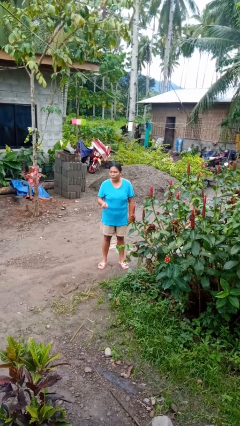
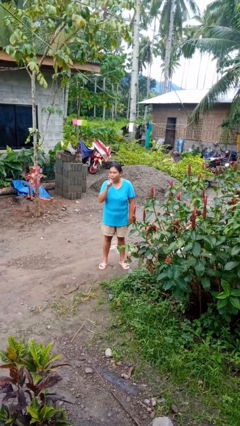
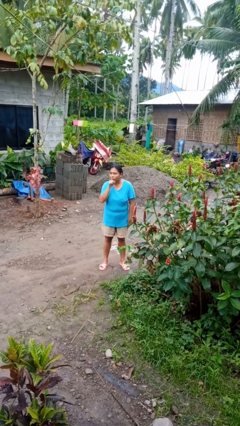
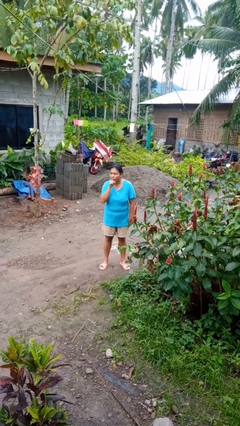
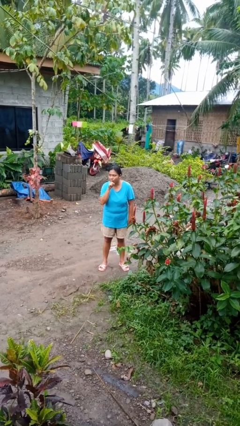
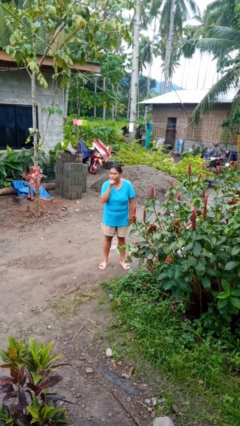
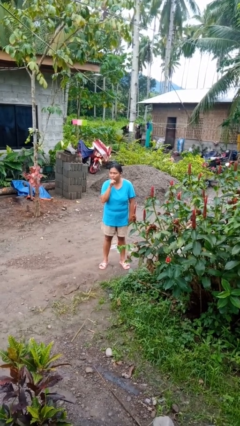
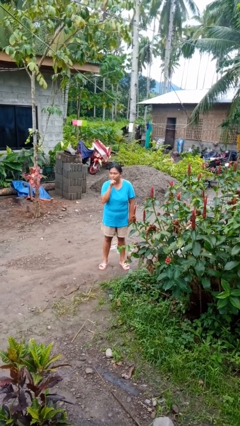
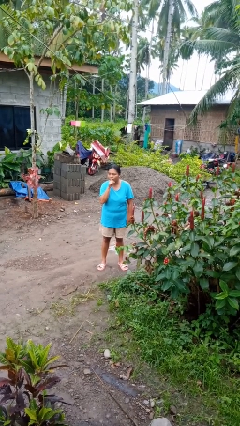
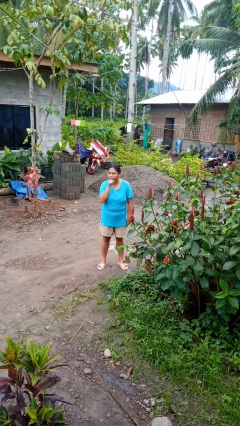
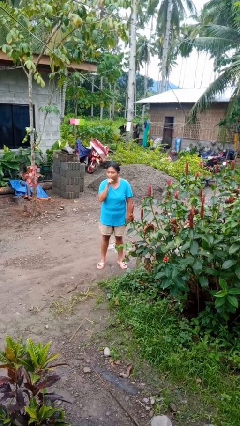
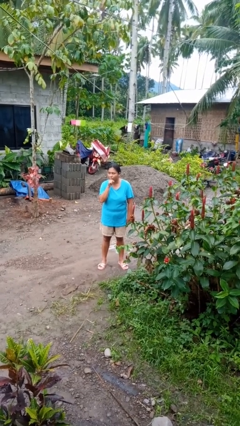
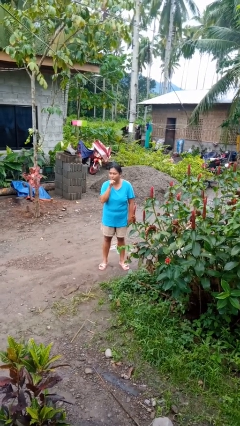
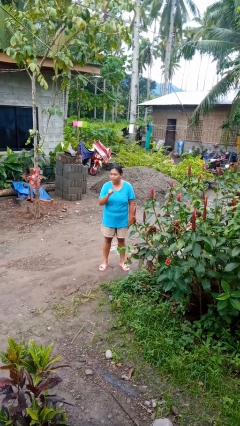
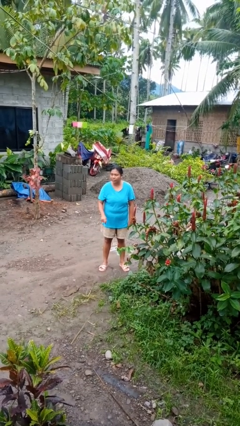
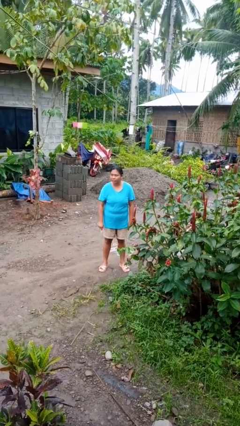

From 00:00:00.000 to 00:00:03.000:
person gestures be quiet

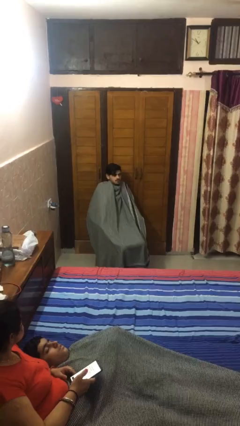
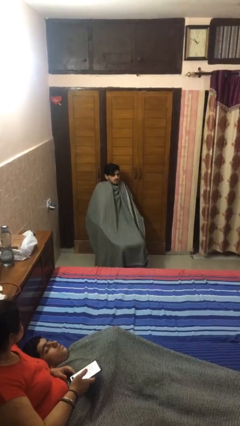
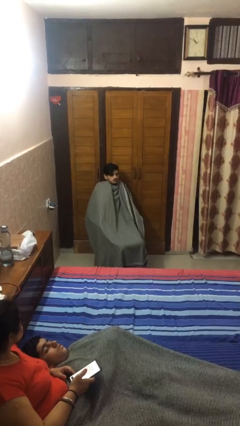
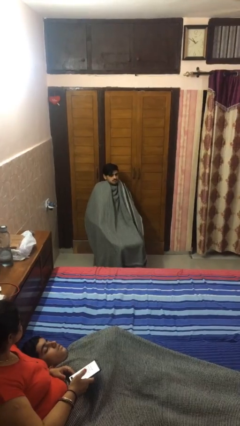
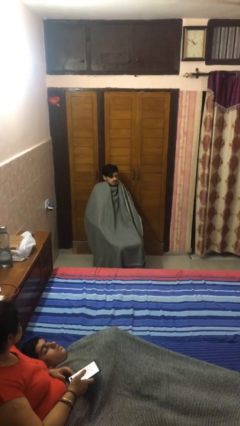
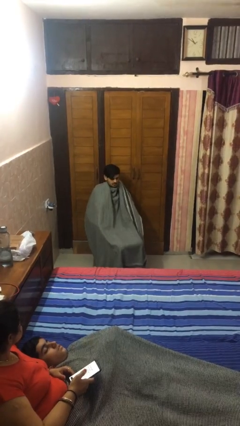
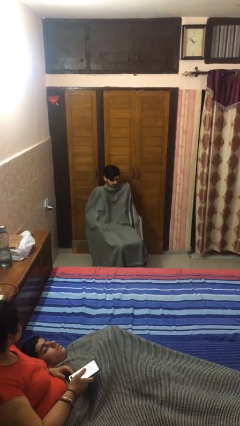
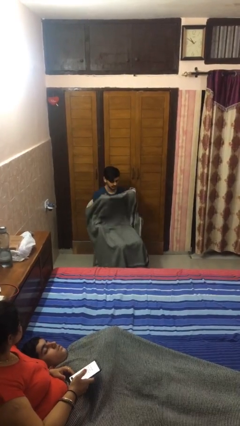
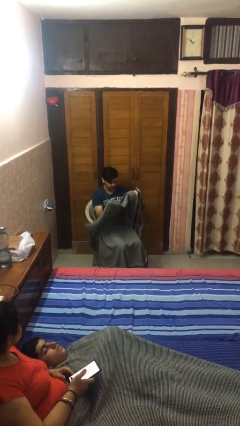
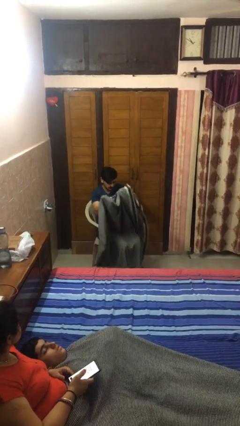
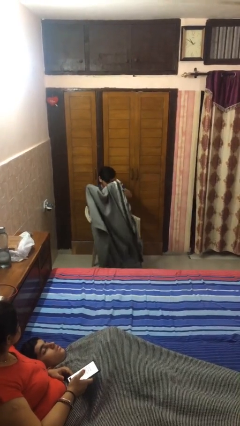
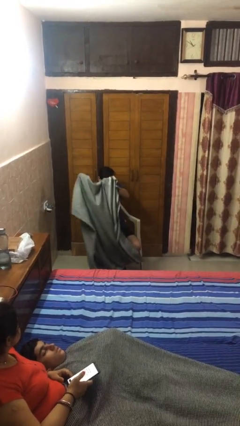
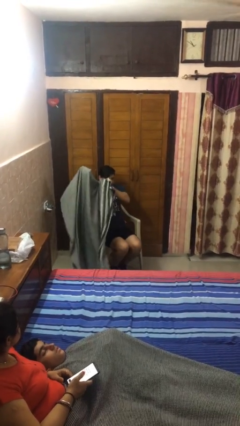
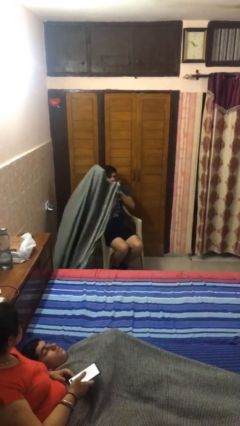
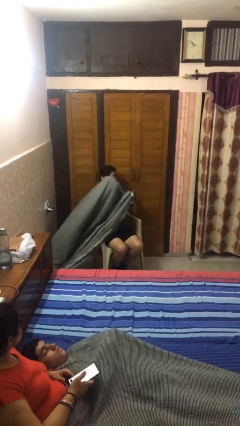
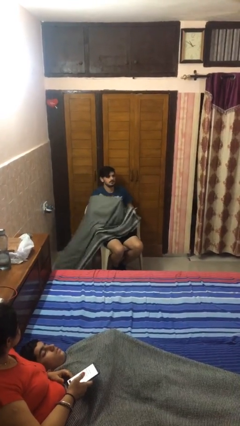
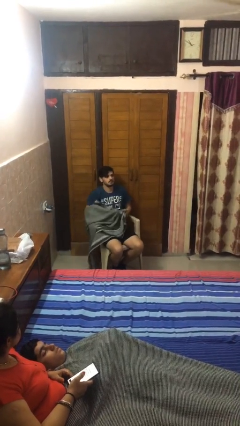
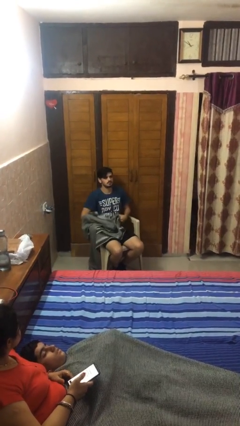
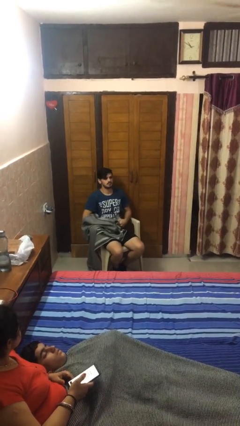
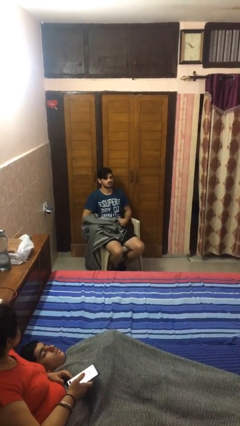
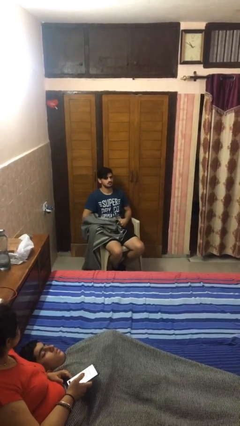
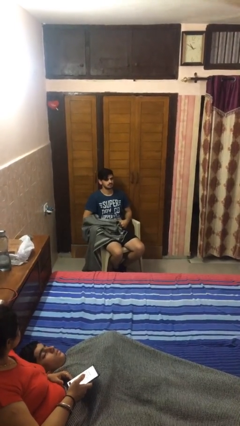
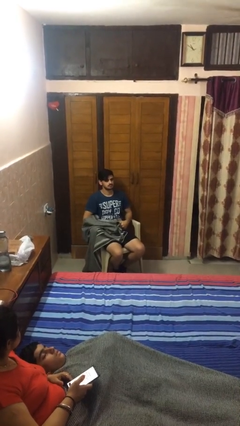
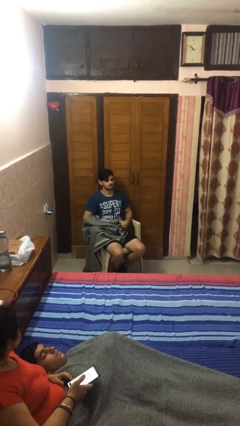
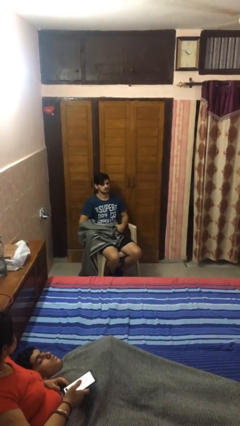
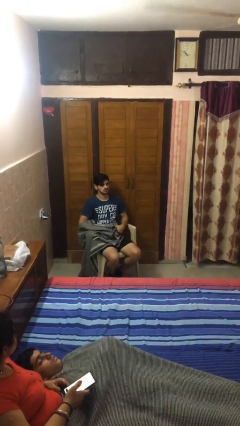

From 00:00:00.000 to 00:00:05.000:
person uncovers with blanket

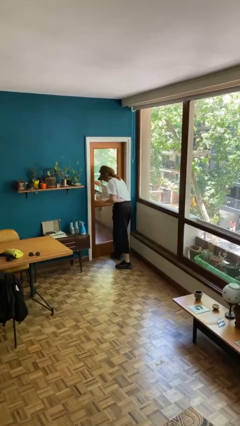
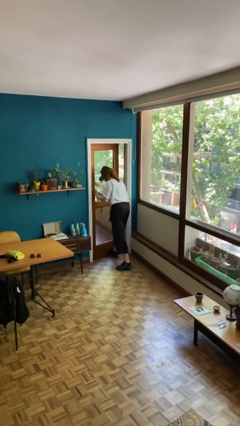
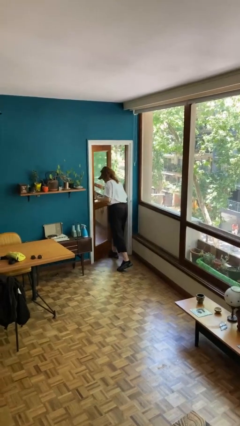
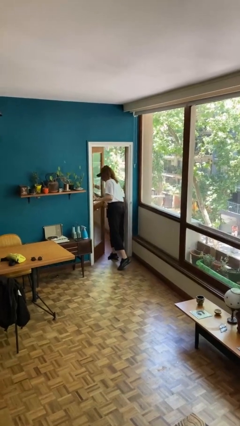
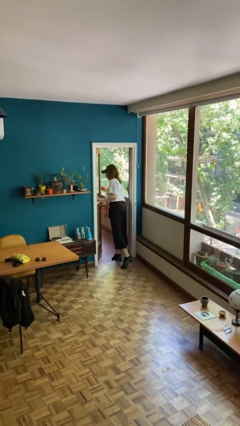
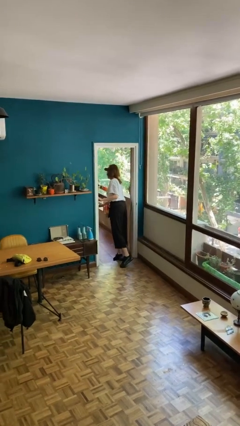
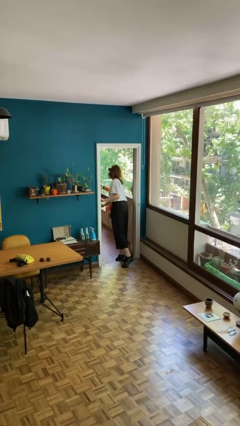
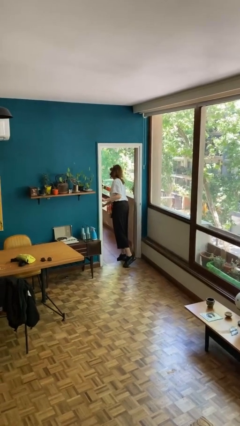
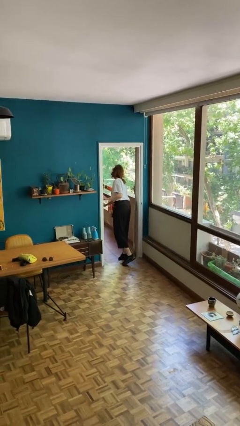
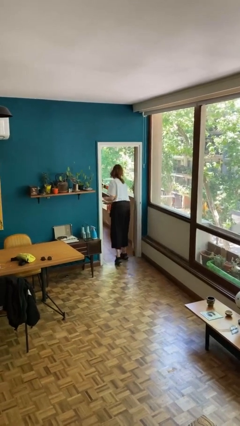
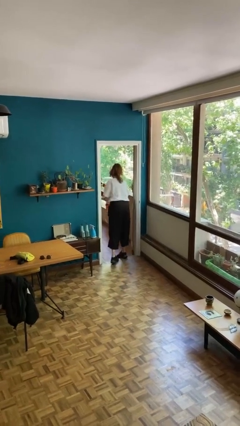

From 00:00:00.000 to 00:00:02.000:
person opens facility door

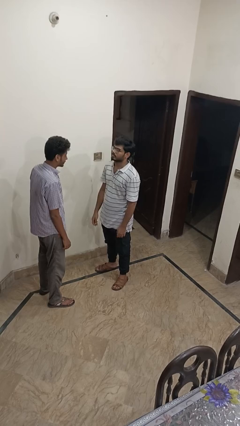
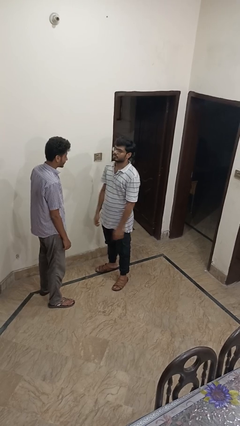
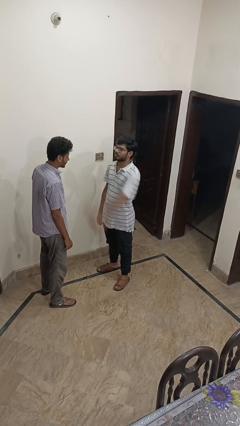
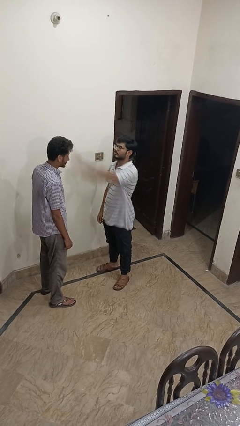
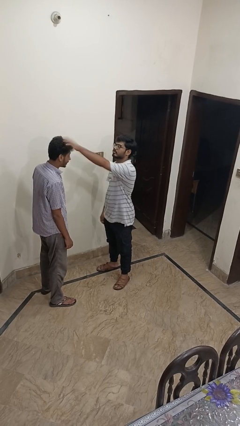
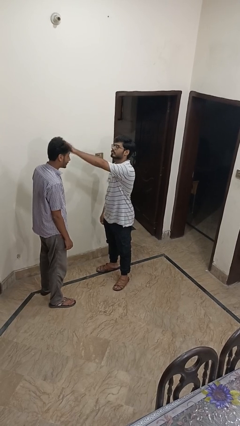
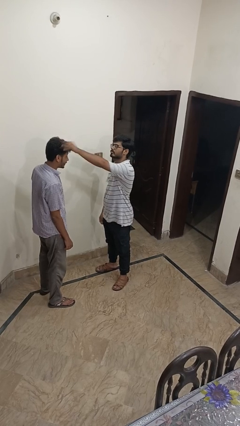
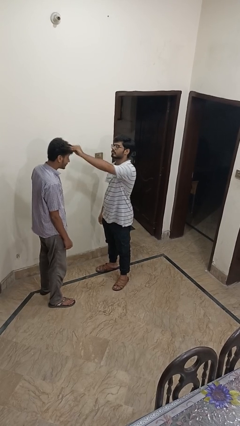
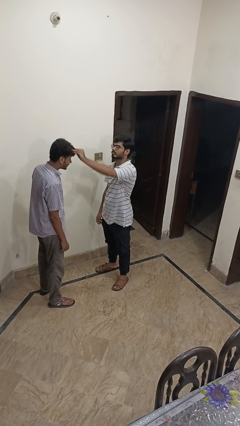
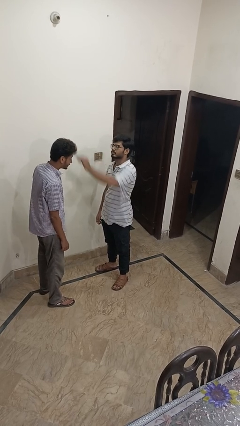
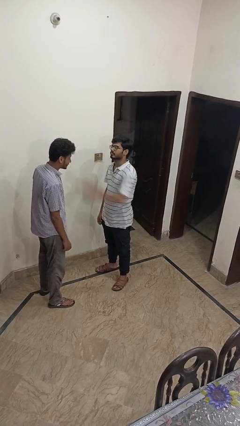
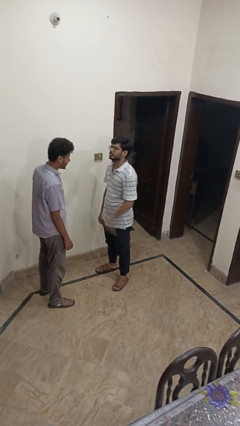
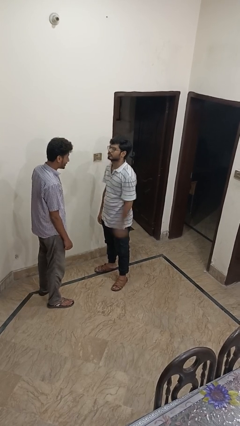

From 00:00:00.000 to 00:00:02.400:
person grabs person by hair

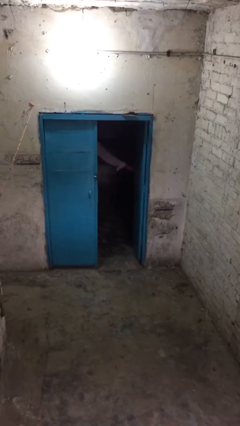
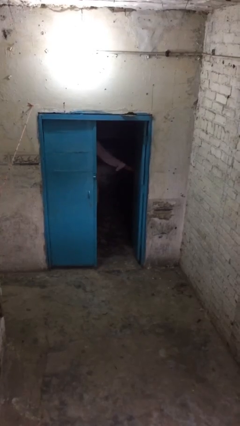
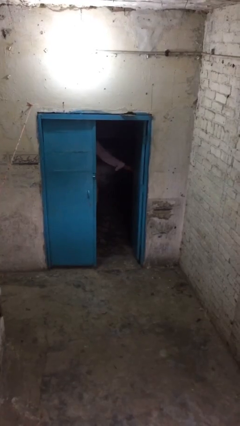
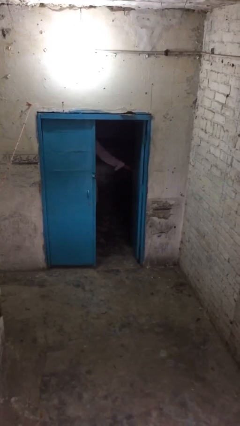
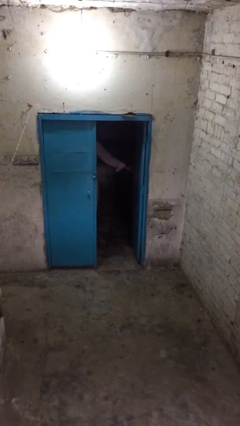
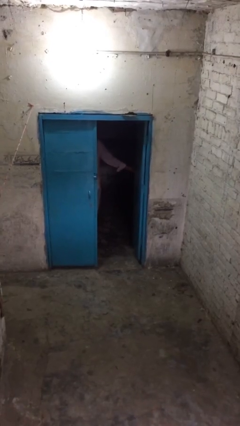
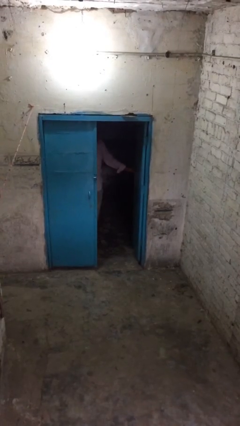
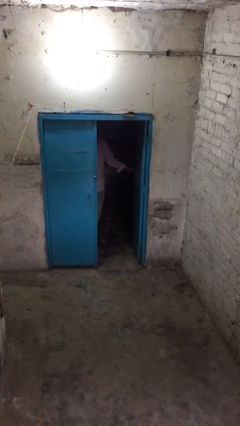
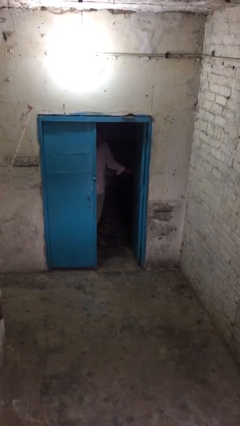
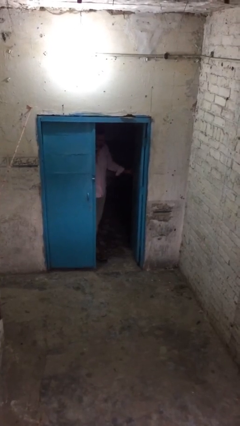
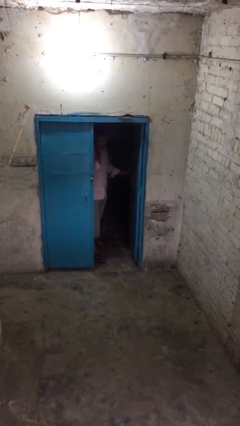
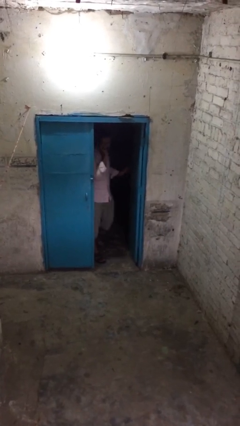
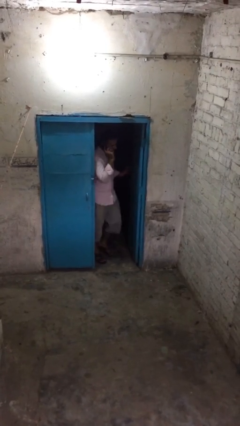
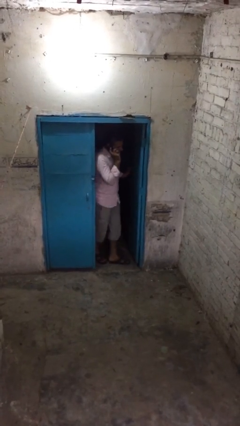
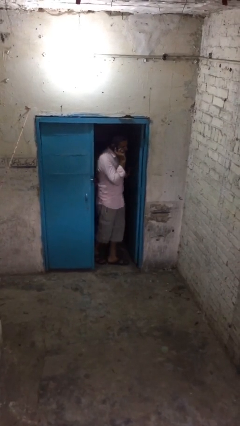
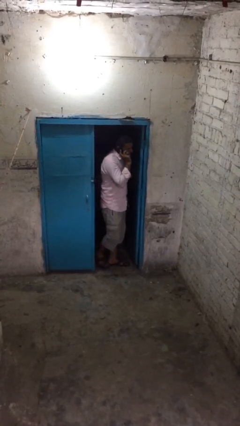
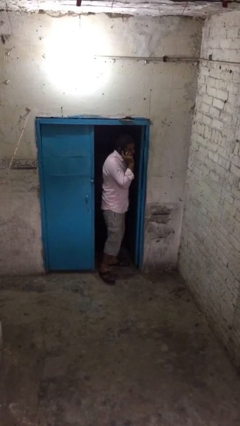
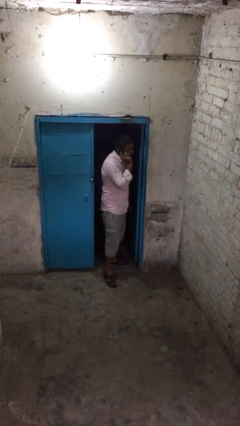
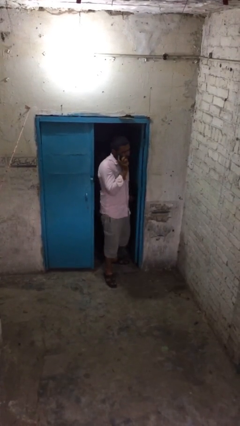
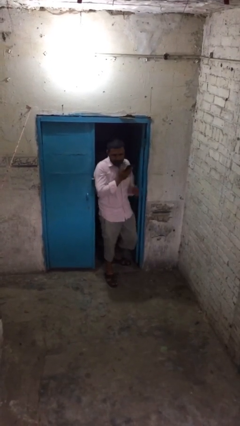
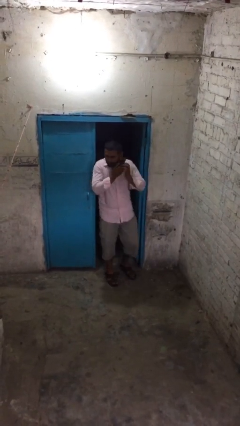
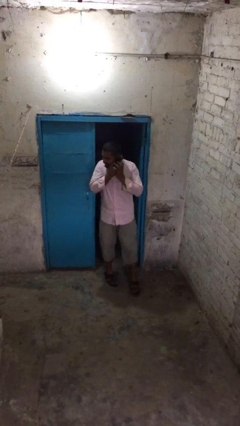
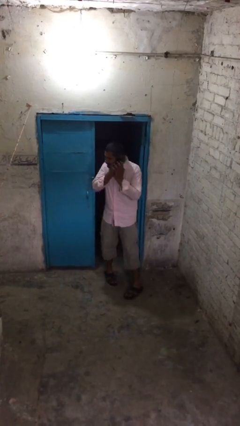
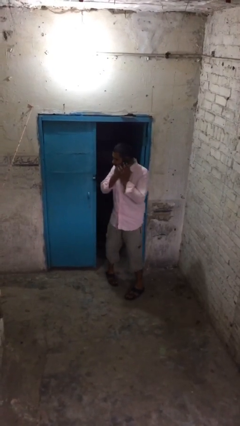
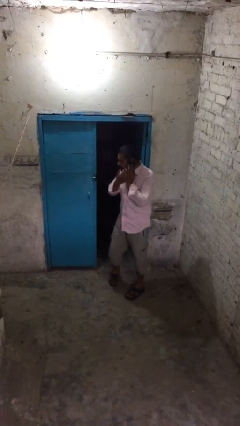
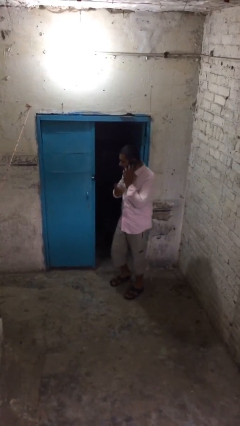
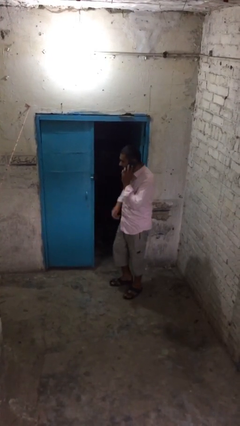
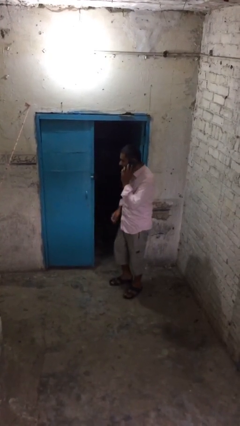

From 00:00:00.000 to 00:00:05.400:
person enters scene through structure
